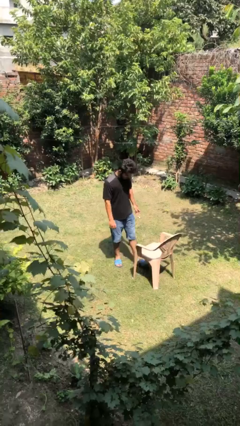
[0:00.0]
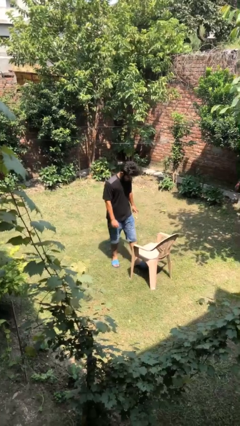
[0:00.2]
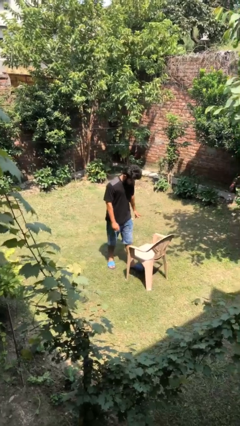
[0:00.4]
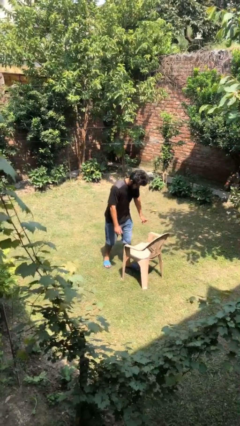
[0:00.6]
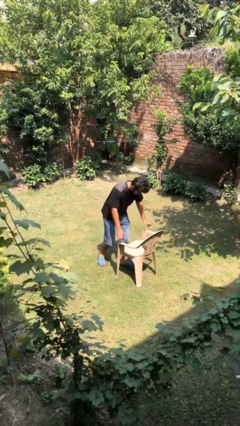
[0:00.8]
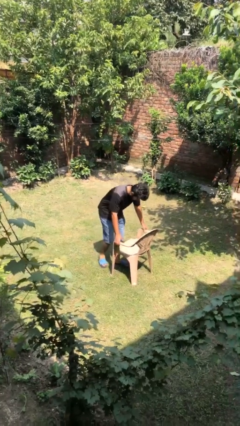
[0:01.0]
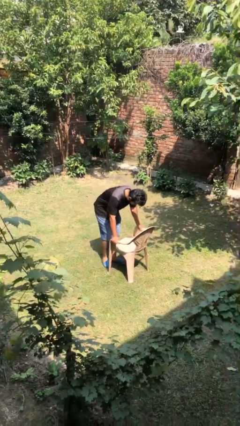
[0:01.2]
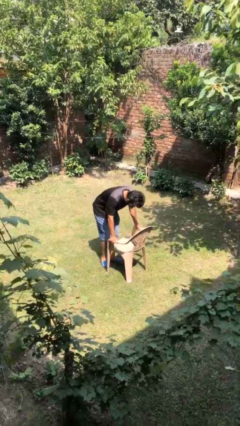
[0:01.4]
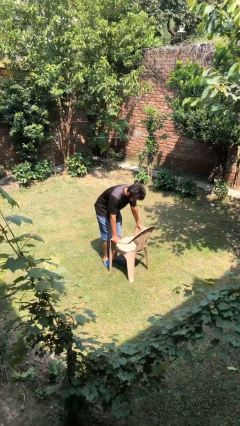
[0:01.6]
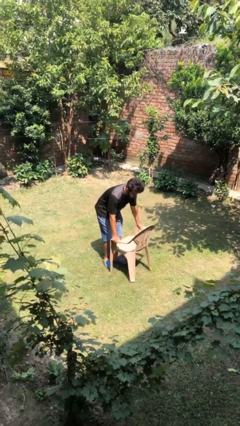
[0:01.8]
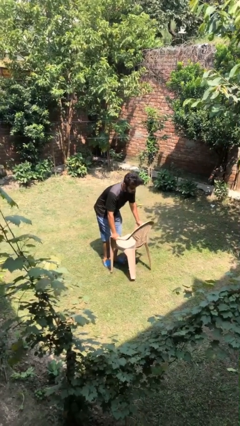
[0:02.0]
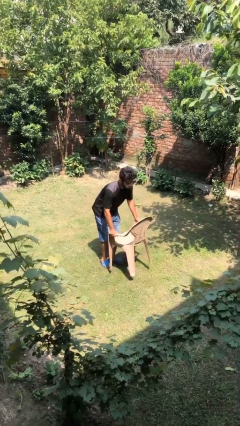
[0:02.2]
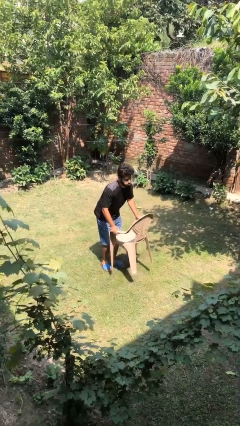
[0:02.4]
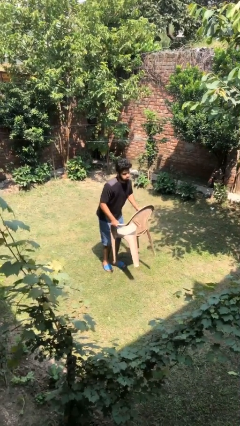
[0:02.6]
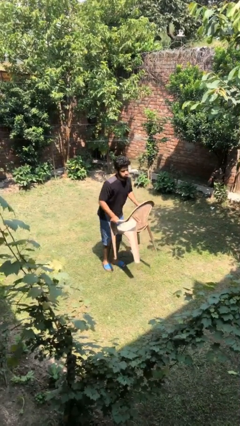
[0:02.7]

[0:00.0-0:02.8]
person picks up object from floor

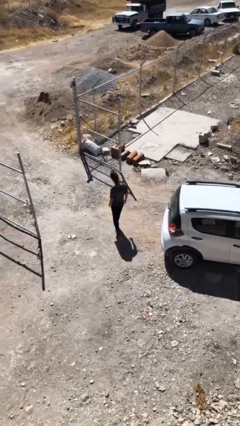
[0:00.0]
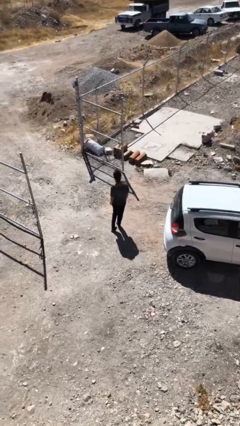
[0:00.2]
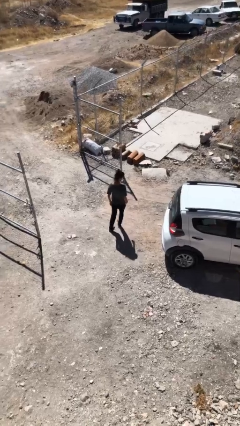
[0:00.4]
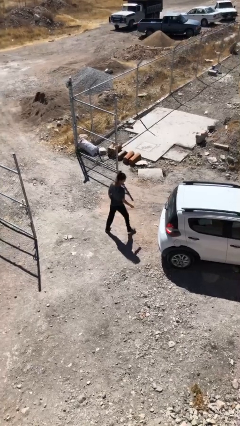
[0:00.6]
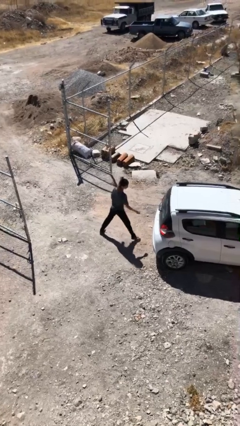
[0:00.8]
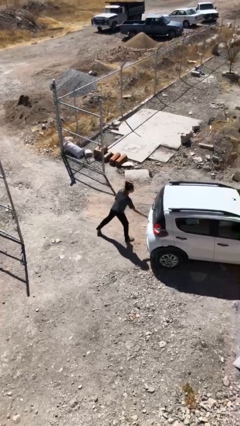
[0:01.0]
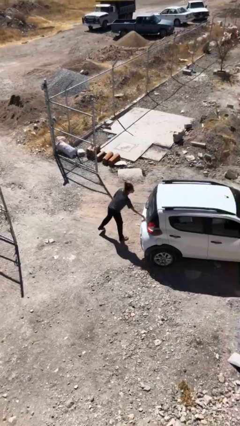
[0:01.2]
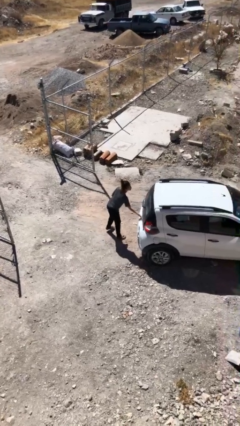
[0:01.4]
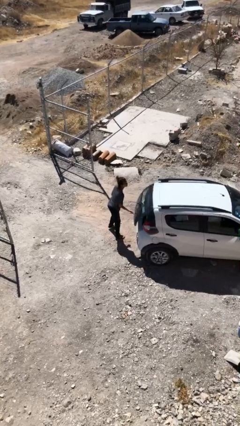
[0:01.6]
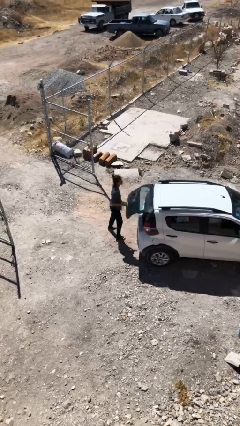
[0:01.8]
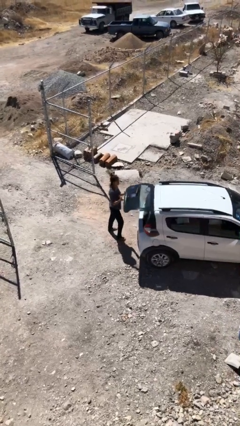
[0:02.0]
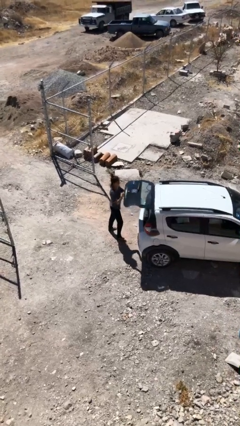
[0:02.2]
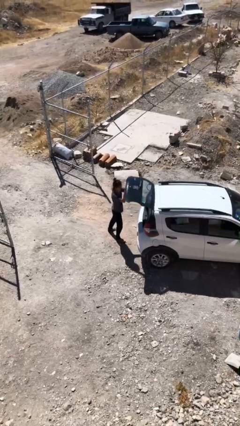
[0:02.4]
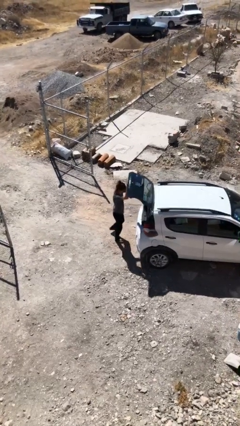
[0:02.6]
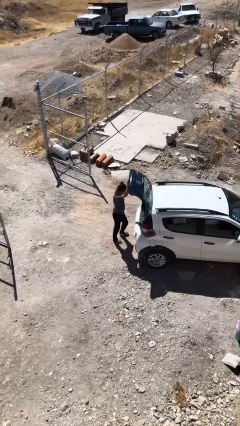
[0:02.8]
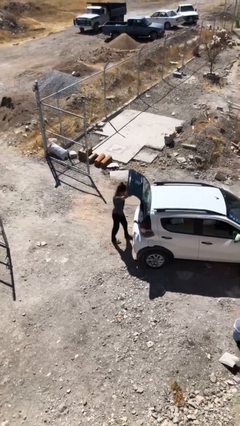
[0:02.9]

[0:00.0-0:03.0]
person opens car trunk

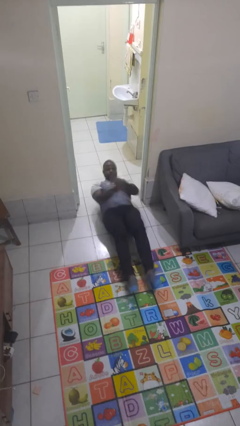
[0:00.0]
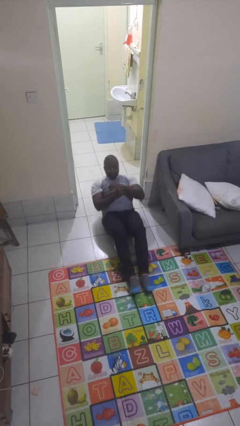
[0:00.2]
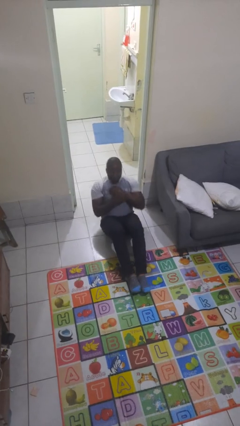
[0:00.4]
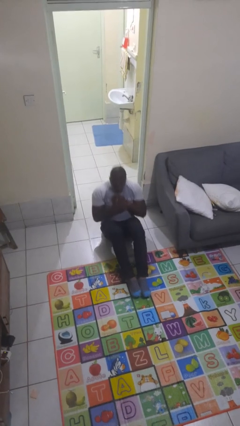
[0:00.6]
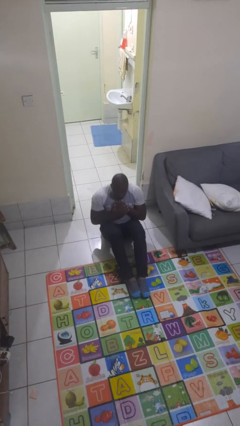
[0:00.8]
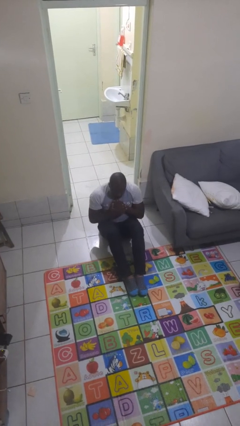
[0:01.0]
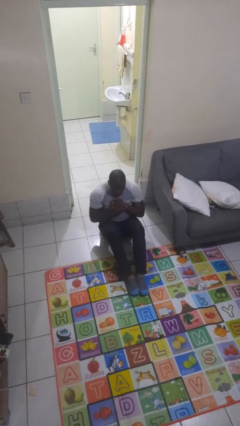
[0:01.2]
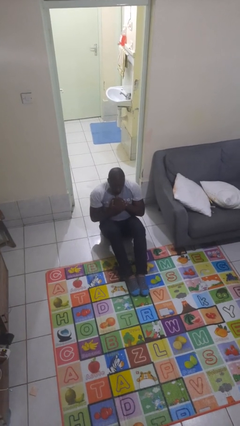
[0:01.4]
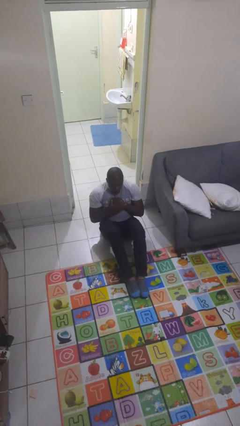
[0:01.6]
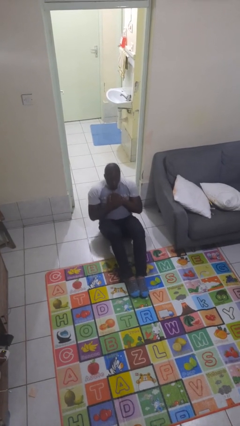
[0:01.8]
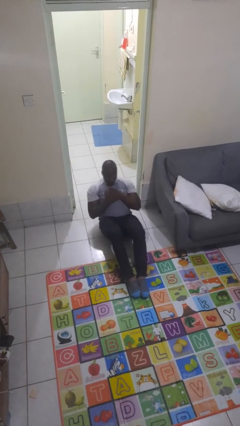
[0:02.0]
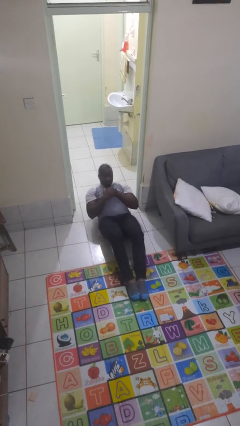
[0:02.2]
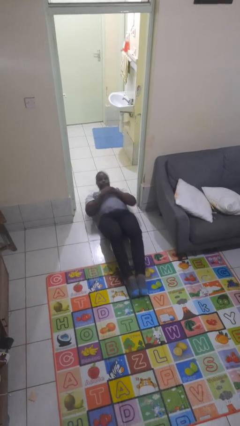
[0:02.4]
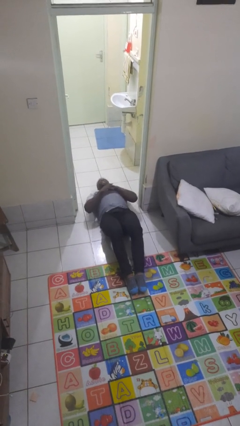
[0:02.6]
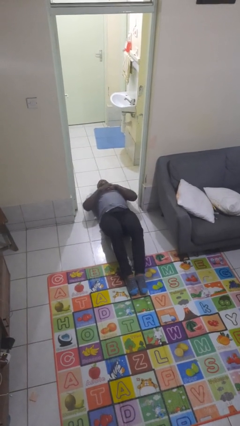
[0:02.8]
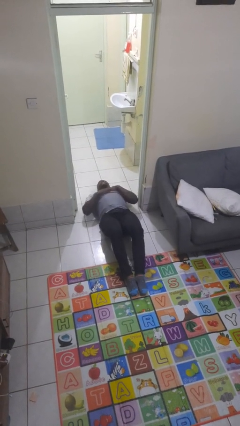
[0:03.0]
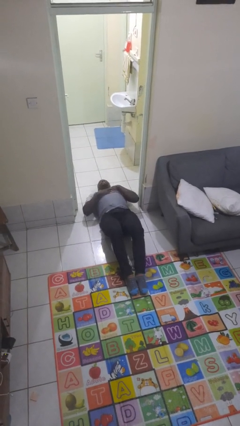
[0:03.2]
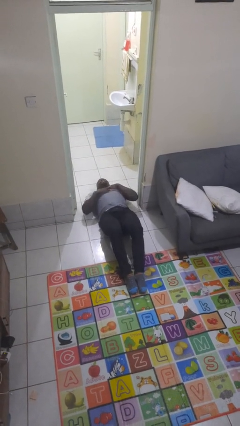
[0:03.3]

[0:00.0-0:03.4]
person exercises with situp

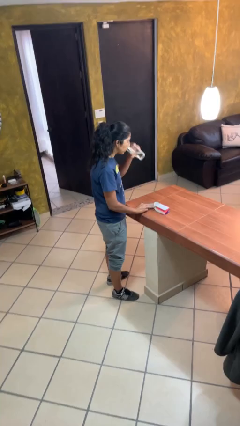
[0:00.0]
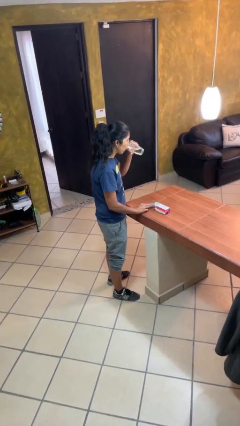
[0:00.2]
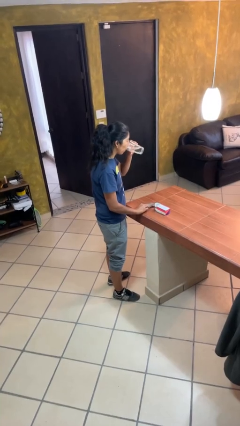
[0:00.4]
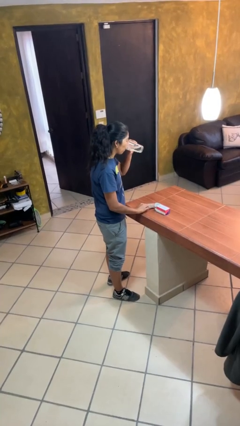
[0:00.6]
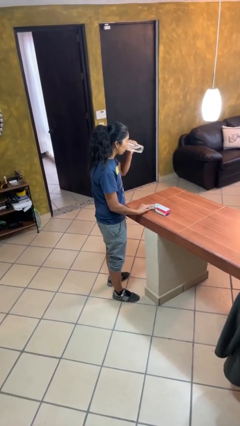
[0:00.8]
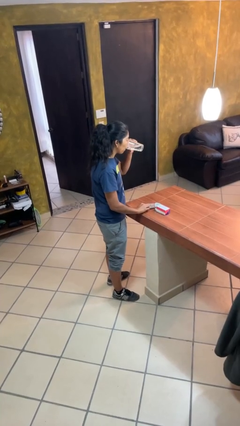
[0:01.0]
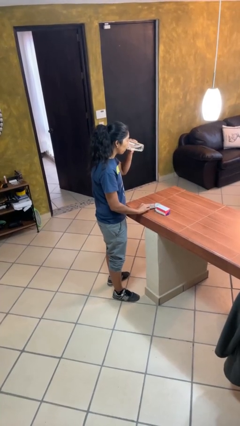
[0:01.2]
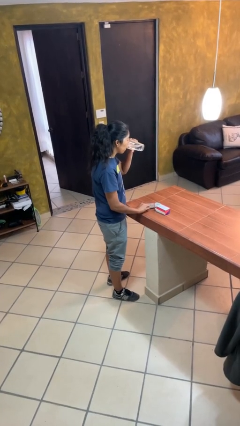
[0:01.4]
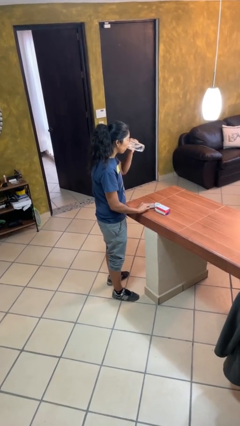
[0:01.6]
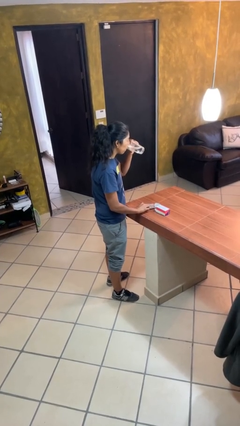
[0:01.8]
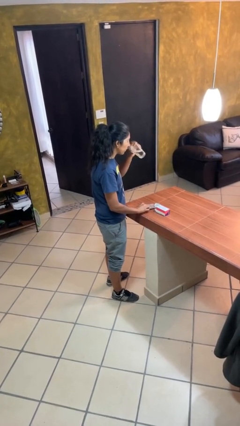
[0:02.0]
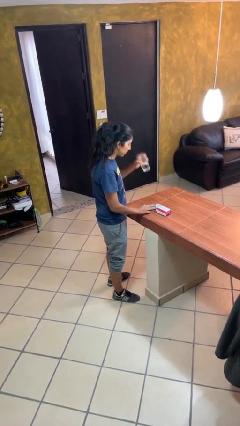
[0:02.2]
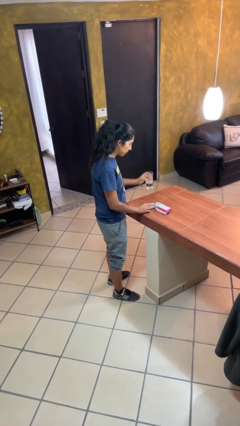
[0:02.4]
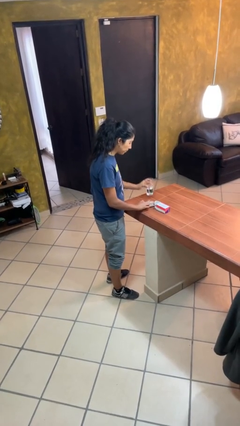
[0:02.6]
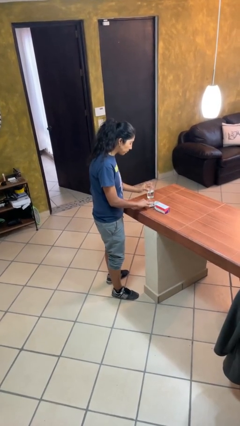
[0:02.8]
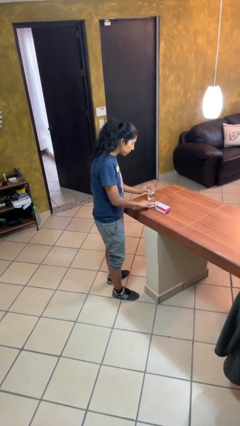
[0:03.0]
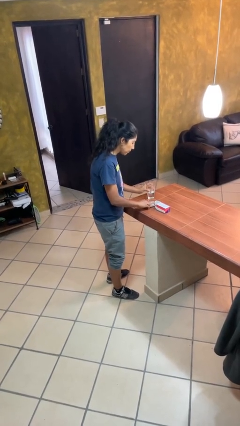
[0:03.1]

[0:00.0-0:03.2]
person drinks from cup

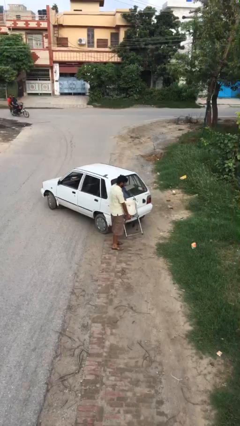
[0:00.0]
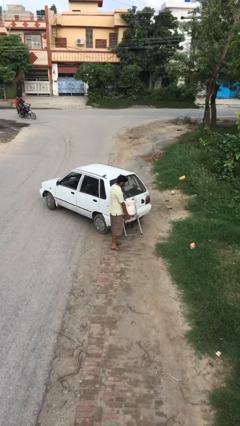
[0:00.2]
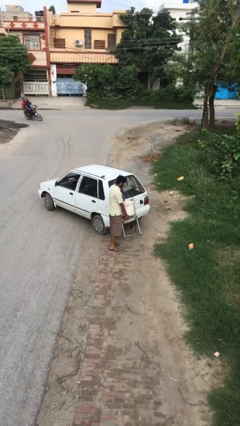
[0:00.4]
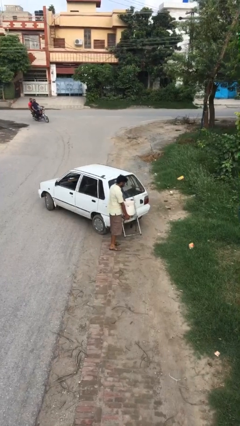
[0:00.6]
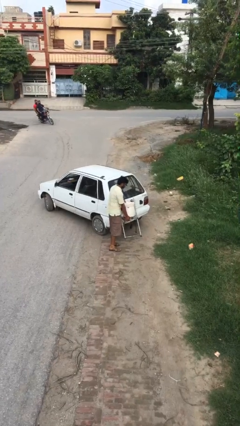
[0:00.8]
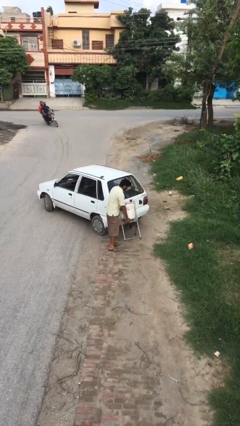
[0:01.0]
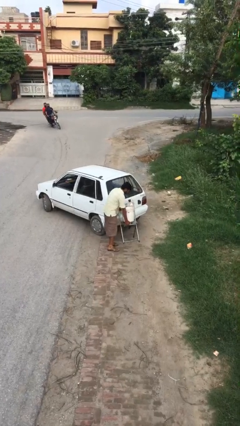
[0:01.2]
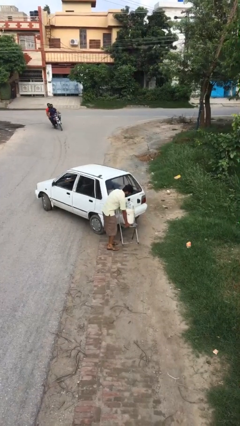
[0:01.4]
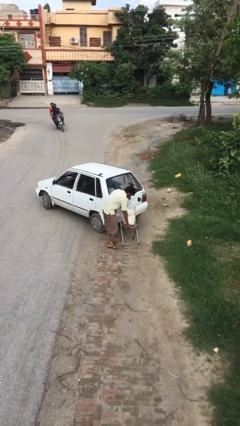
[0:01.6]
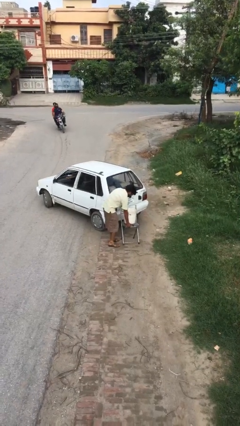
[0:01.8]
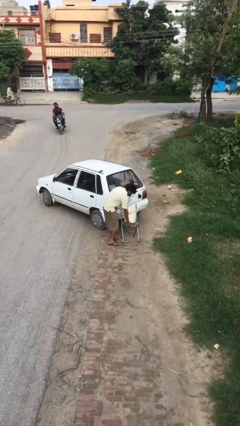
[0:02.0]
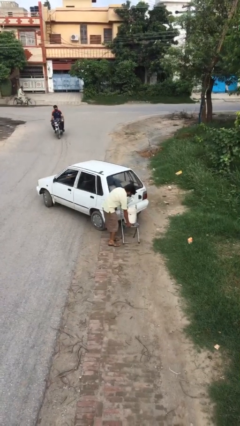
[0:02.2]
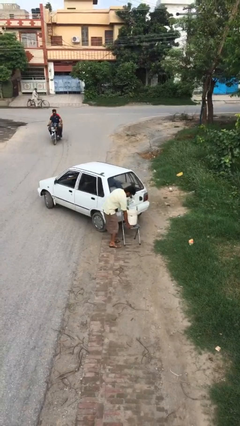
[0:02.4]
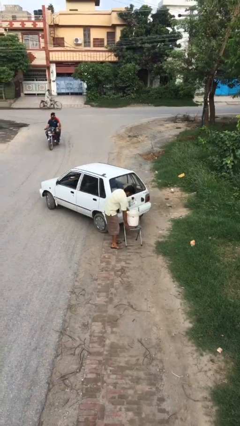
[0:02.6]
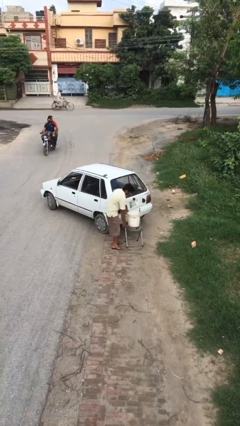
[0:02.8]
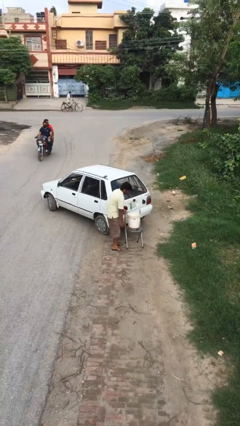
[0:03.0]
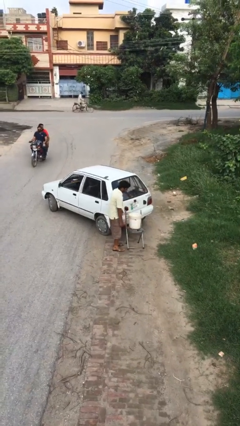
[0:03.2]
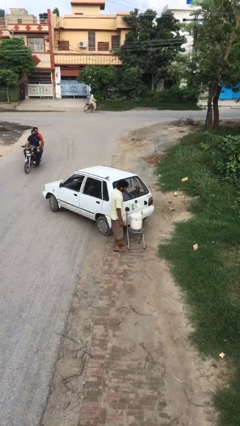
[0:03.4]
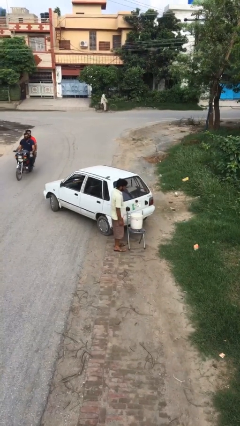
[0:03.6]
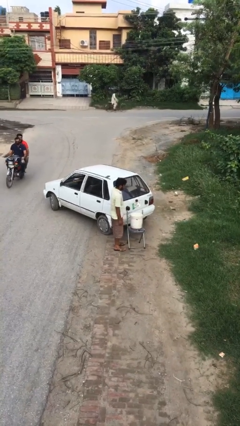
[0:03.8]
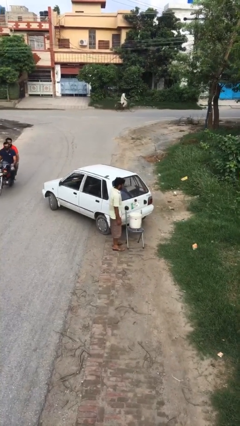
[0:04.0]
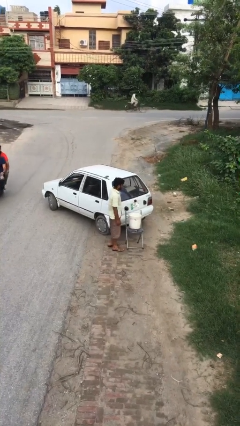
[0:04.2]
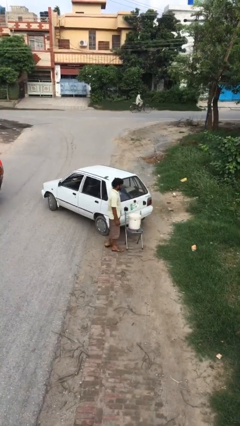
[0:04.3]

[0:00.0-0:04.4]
person puts down object on floor

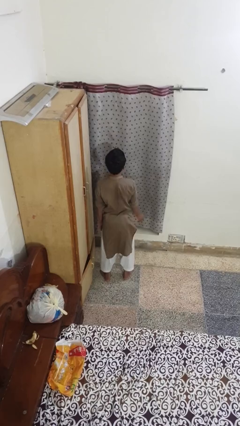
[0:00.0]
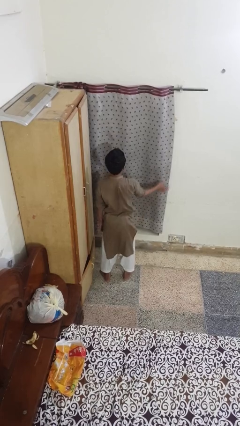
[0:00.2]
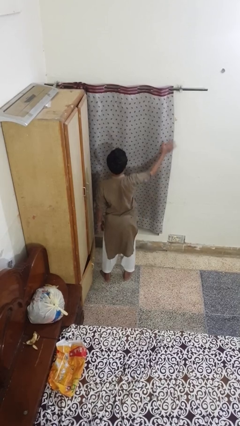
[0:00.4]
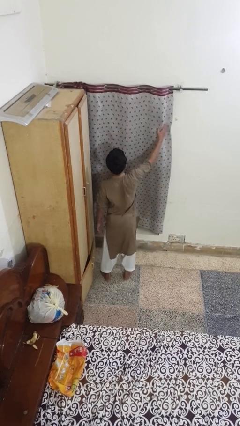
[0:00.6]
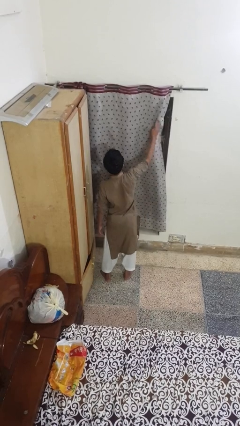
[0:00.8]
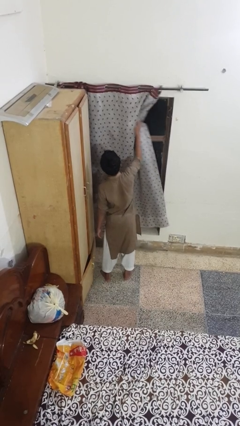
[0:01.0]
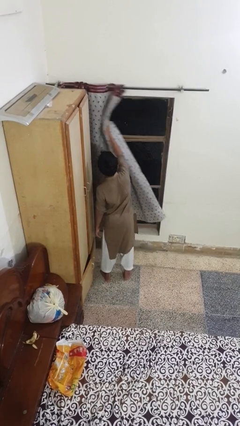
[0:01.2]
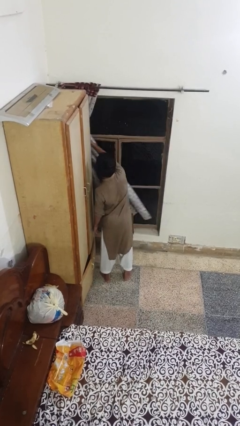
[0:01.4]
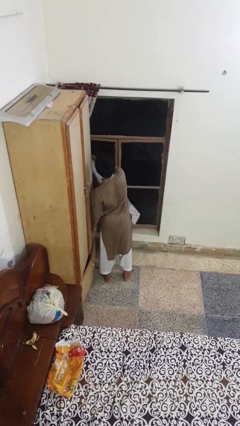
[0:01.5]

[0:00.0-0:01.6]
person opens curtains
